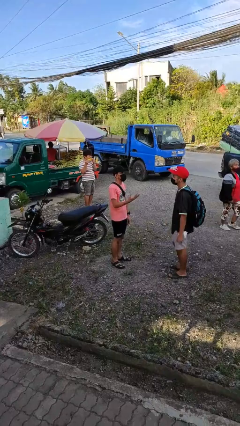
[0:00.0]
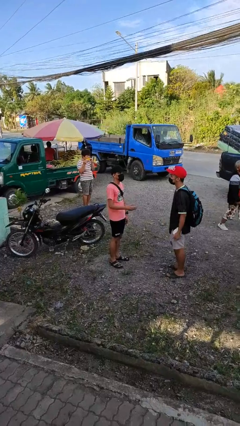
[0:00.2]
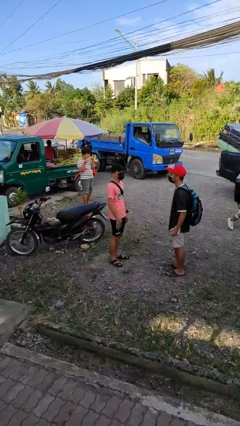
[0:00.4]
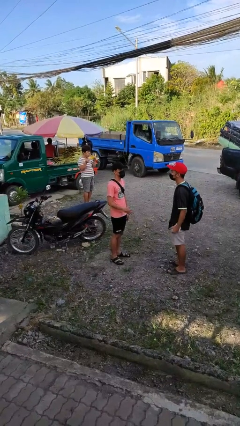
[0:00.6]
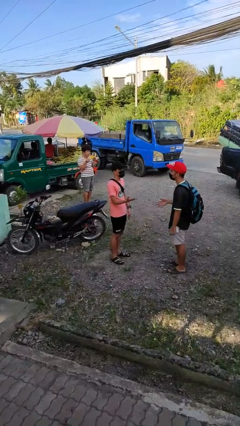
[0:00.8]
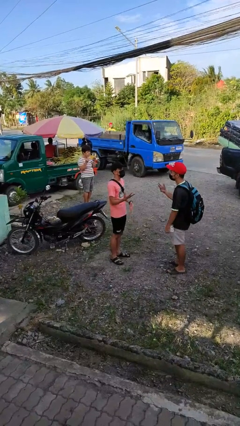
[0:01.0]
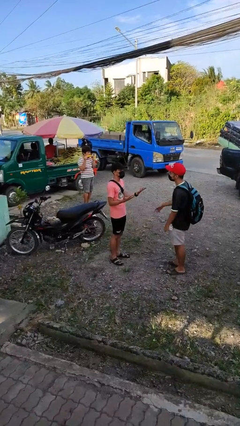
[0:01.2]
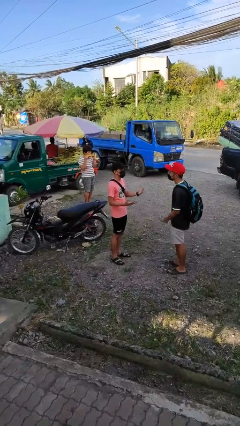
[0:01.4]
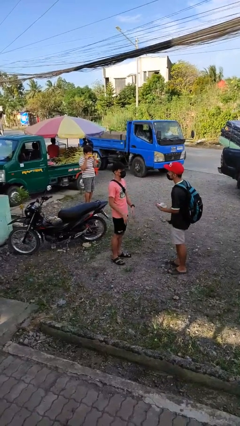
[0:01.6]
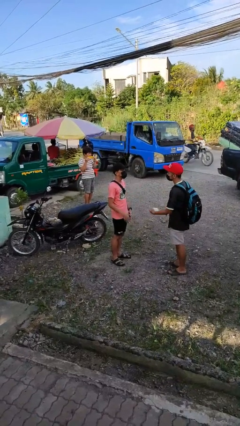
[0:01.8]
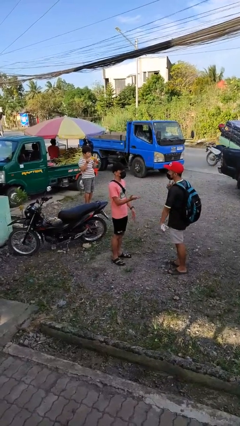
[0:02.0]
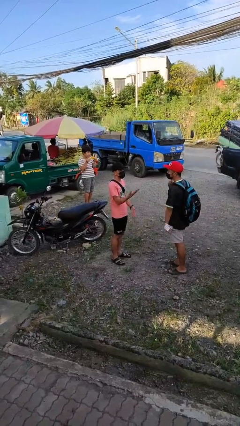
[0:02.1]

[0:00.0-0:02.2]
person talks to person

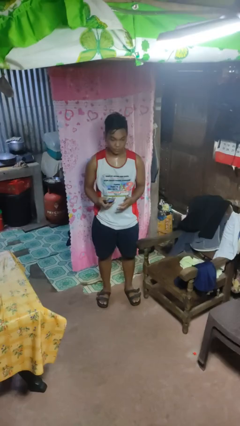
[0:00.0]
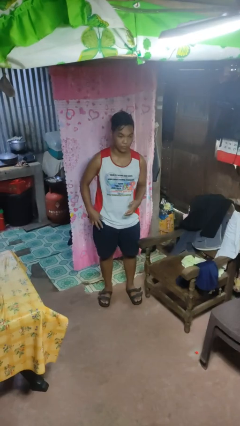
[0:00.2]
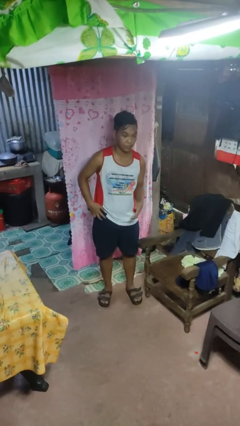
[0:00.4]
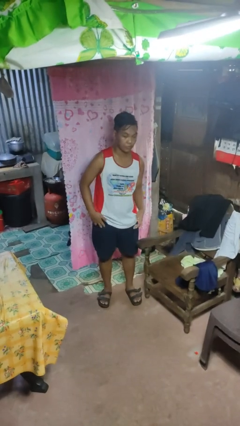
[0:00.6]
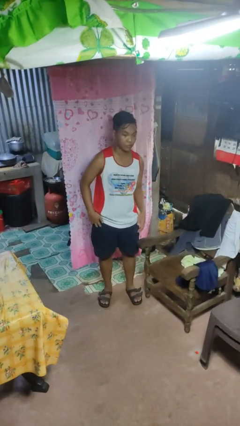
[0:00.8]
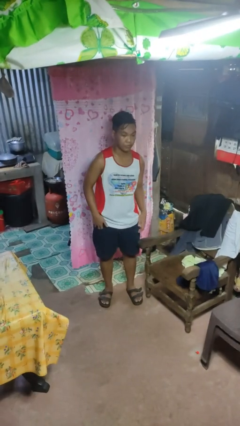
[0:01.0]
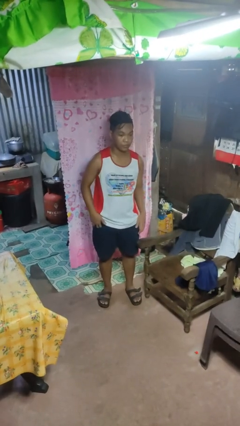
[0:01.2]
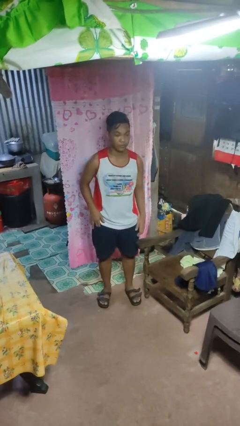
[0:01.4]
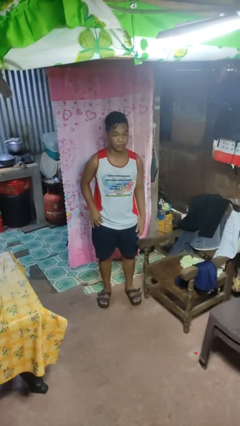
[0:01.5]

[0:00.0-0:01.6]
person puts phone into pocket

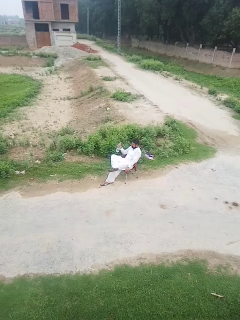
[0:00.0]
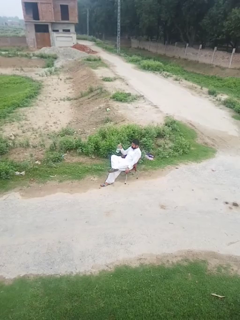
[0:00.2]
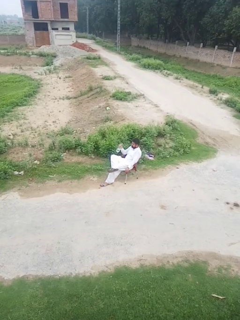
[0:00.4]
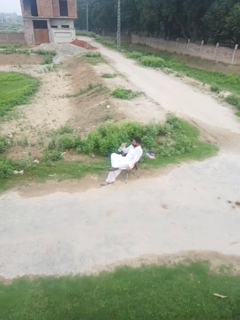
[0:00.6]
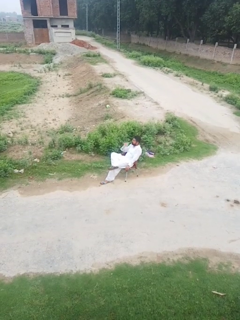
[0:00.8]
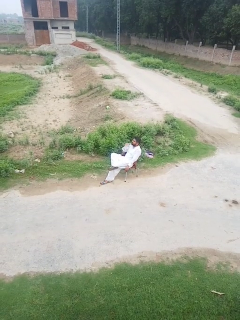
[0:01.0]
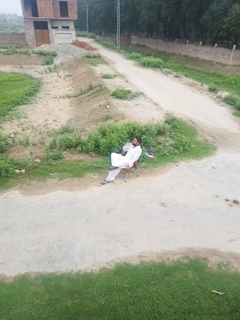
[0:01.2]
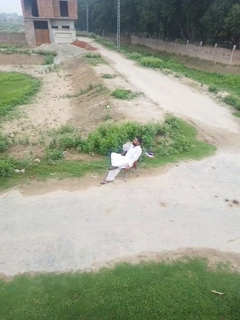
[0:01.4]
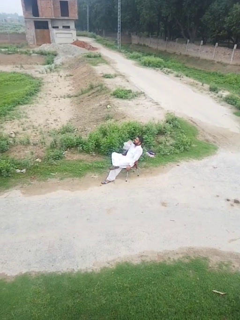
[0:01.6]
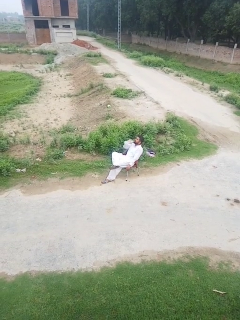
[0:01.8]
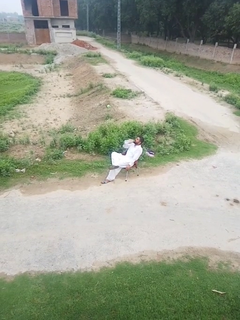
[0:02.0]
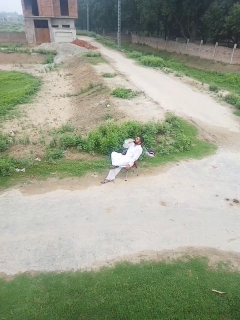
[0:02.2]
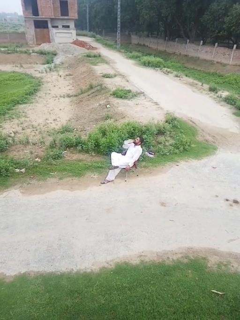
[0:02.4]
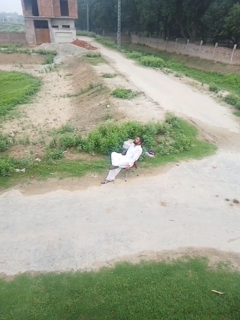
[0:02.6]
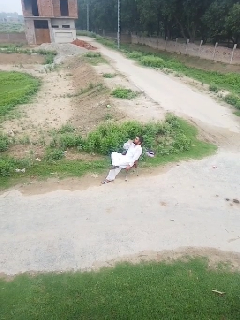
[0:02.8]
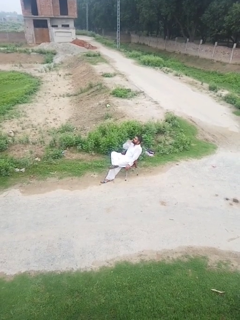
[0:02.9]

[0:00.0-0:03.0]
person drinks from bottle

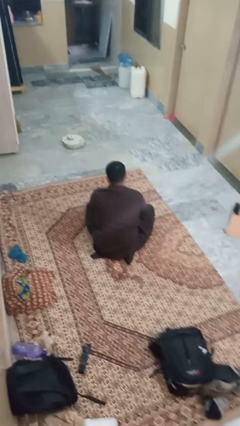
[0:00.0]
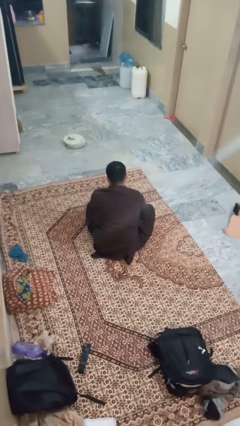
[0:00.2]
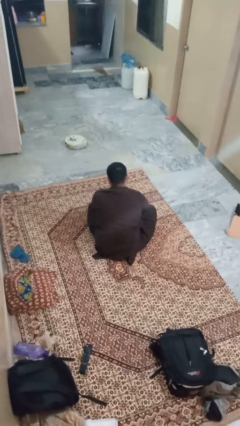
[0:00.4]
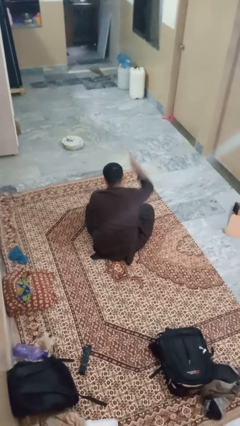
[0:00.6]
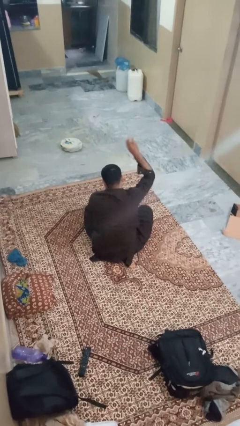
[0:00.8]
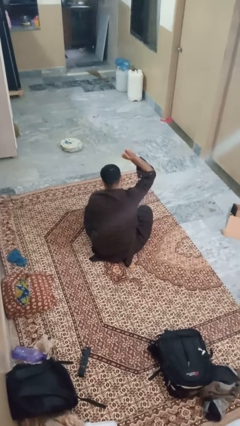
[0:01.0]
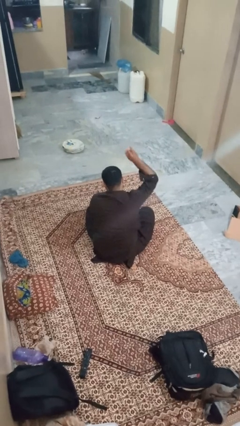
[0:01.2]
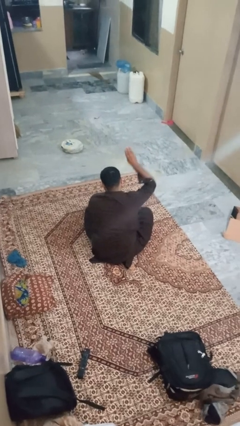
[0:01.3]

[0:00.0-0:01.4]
person gestures number three

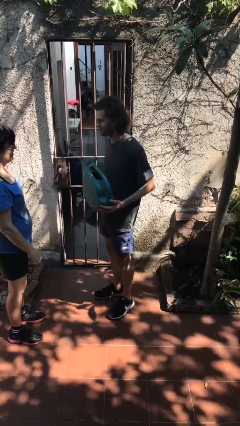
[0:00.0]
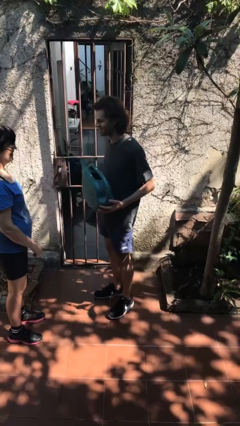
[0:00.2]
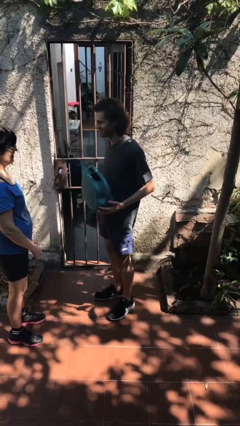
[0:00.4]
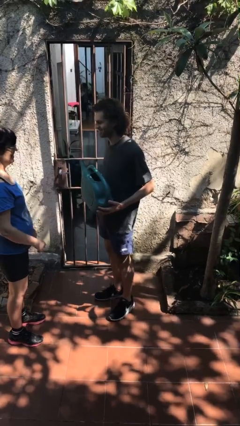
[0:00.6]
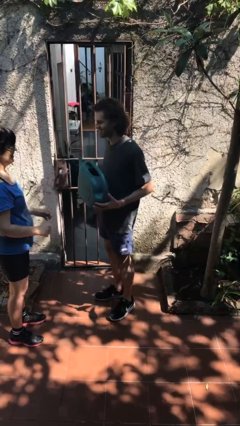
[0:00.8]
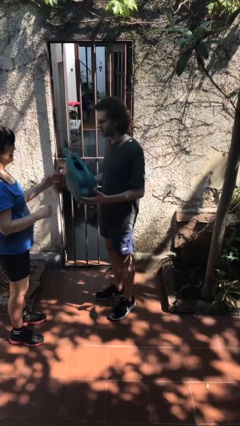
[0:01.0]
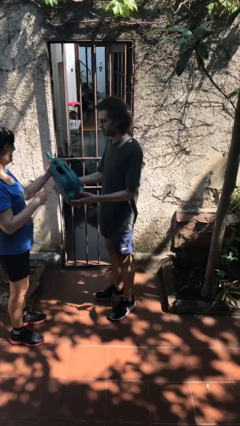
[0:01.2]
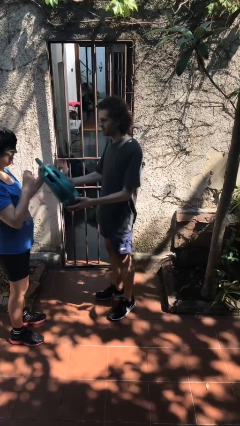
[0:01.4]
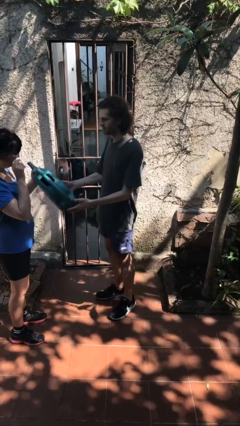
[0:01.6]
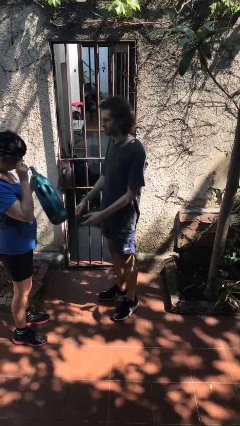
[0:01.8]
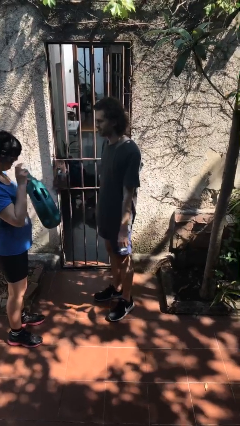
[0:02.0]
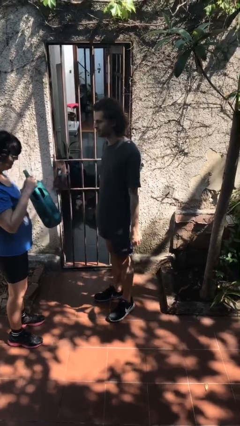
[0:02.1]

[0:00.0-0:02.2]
person transfers object to person

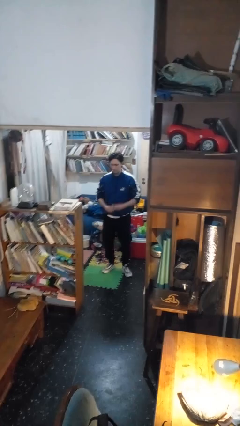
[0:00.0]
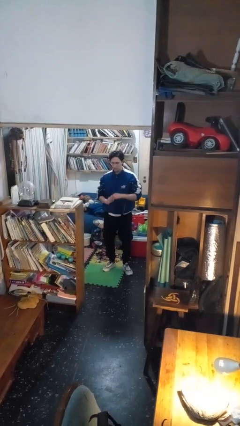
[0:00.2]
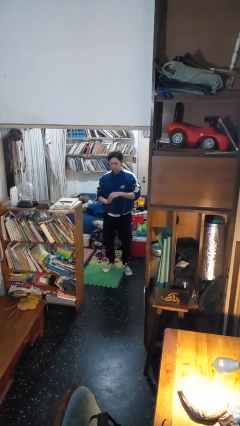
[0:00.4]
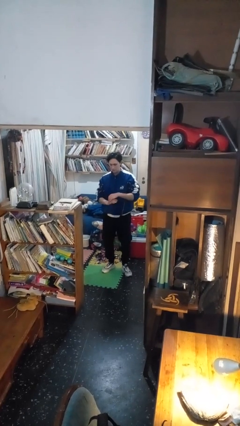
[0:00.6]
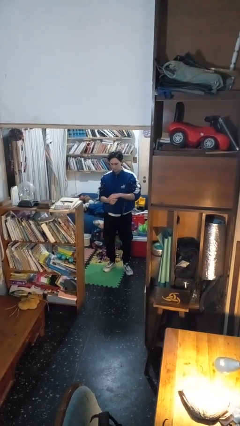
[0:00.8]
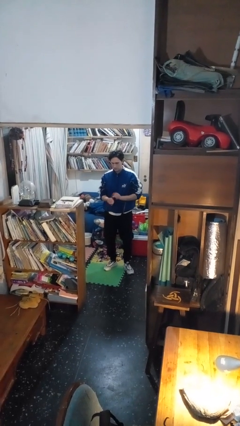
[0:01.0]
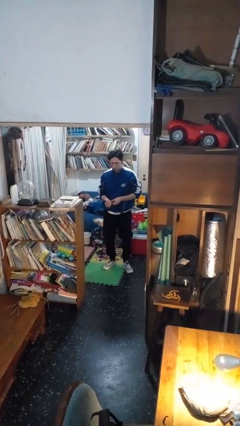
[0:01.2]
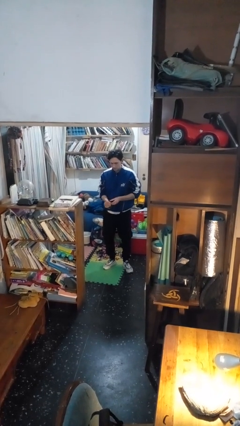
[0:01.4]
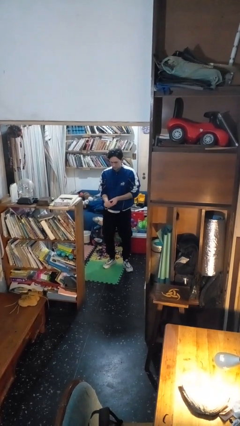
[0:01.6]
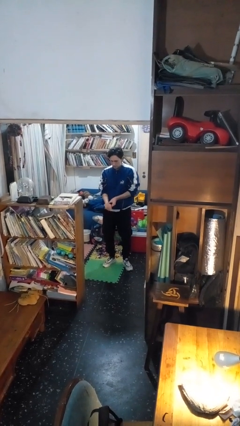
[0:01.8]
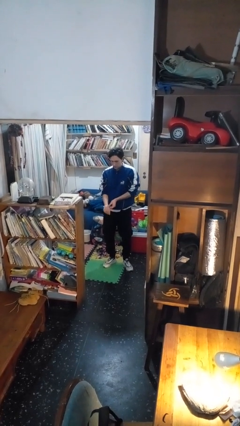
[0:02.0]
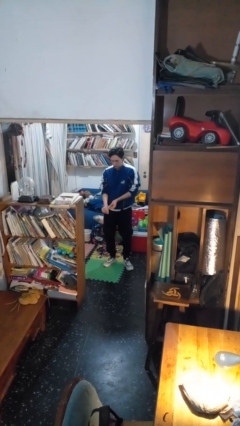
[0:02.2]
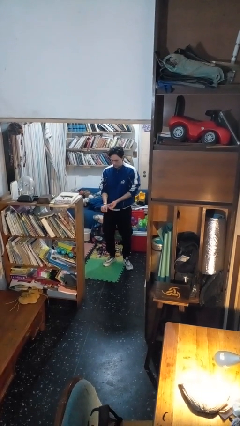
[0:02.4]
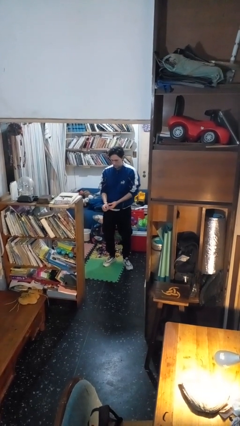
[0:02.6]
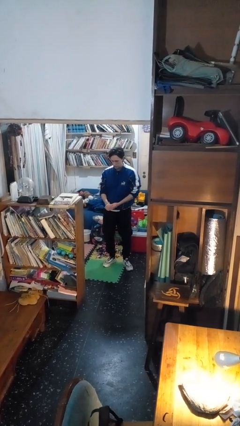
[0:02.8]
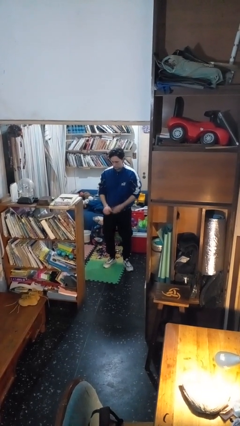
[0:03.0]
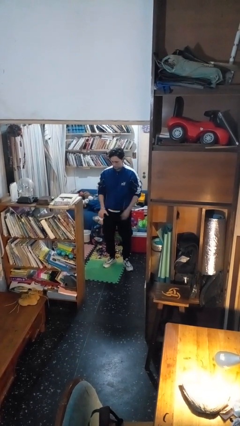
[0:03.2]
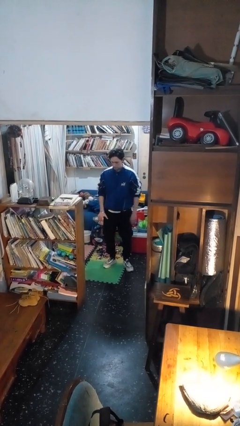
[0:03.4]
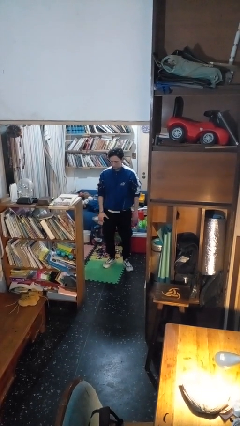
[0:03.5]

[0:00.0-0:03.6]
person puts on wristwatch

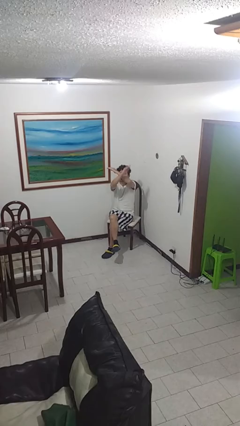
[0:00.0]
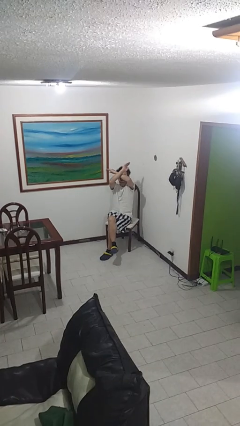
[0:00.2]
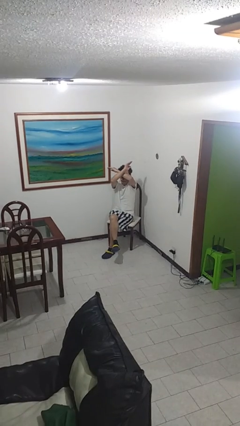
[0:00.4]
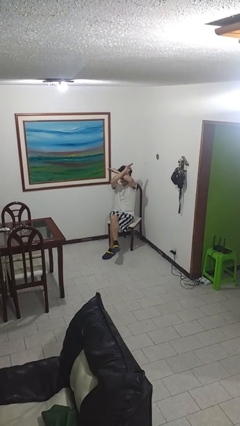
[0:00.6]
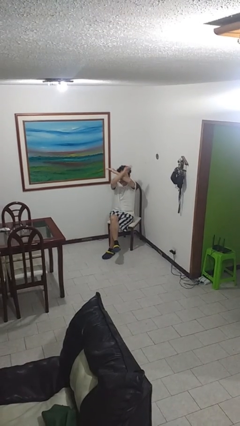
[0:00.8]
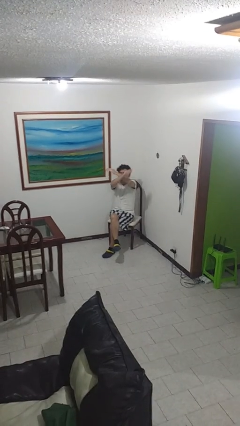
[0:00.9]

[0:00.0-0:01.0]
person gestures arms x

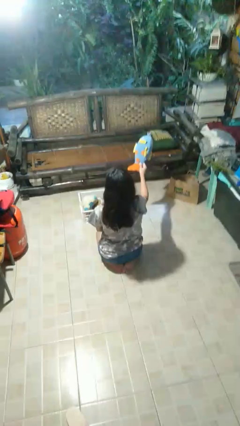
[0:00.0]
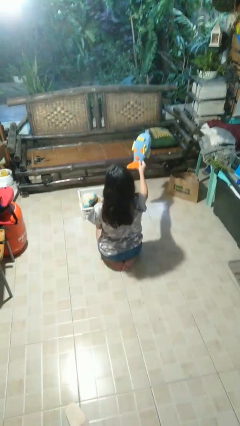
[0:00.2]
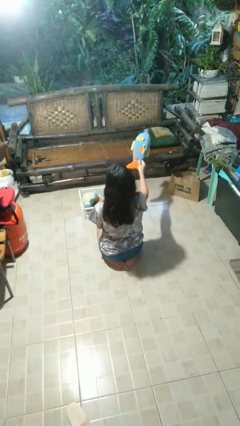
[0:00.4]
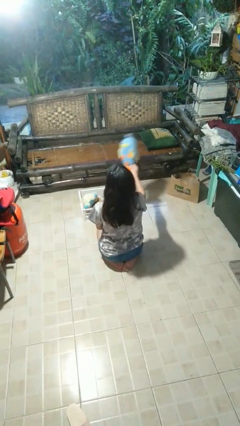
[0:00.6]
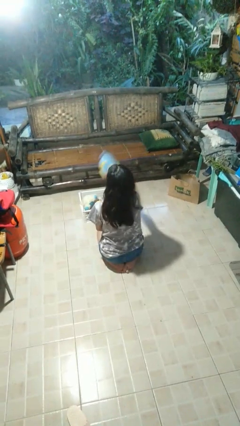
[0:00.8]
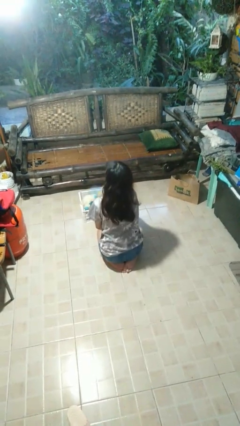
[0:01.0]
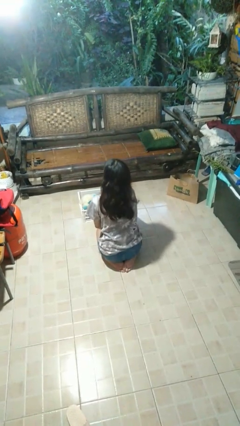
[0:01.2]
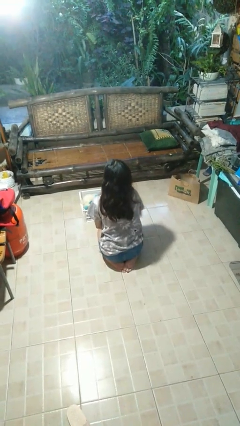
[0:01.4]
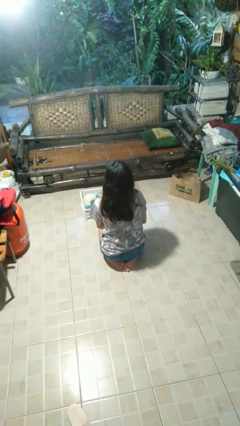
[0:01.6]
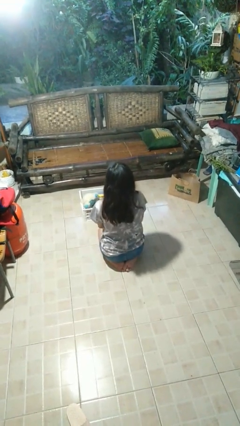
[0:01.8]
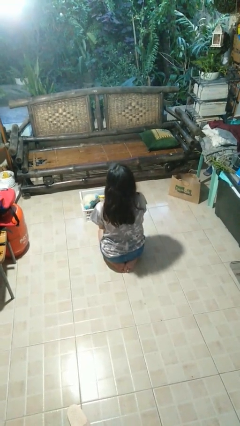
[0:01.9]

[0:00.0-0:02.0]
person puts object into basket

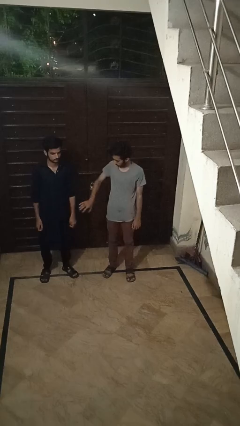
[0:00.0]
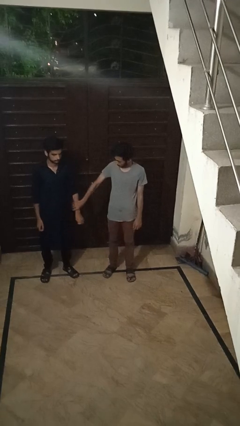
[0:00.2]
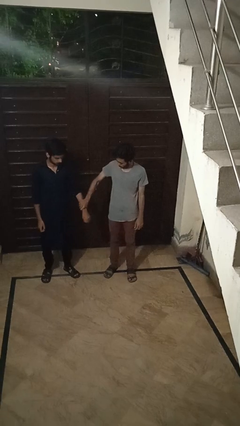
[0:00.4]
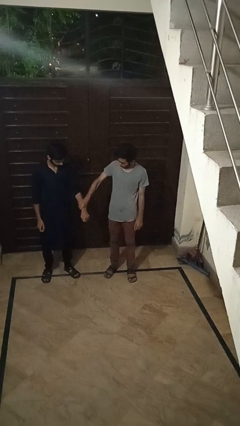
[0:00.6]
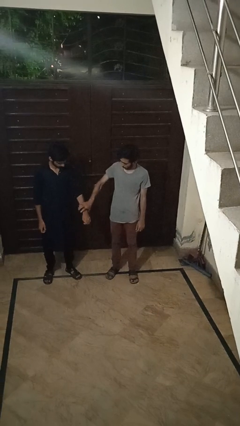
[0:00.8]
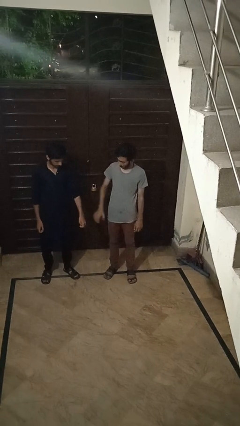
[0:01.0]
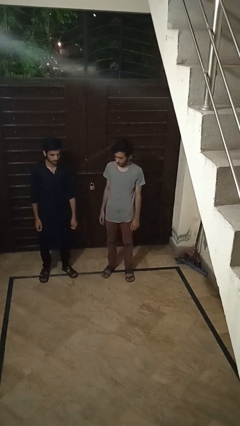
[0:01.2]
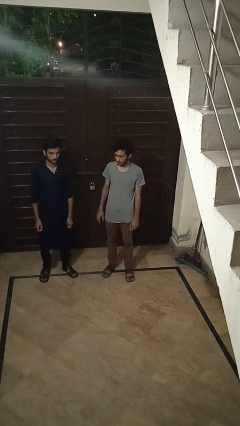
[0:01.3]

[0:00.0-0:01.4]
person grabs person by forearm
